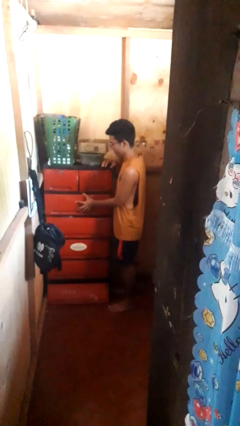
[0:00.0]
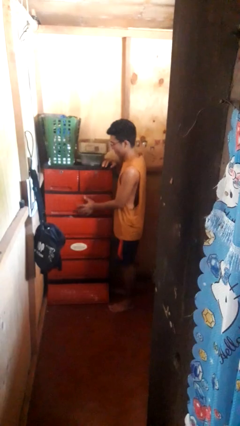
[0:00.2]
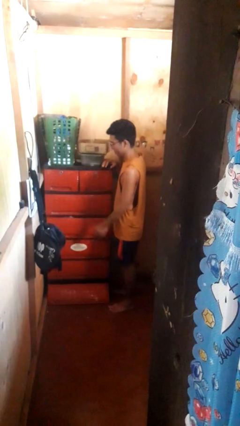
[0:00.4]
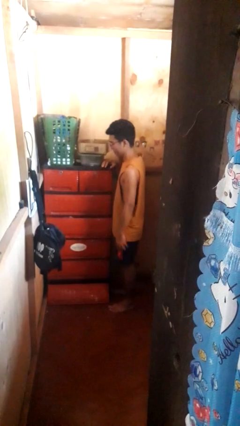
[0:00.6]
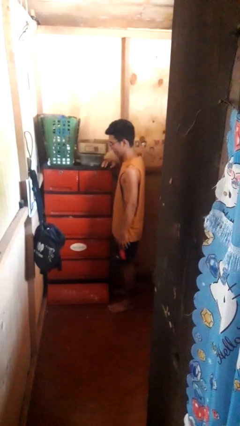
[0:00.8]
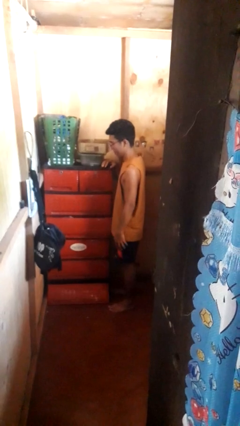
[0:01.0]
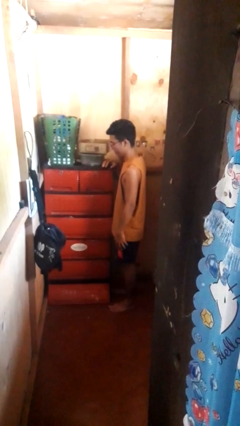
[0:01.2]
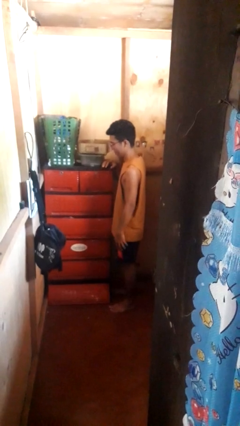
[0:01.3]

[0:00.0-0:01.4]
person closes dresser drawer

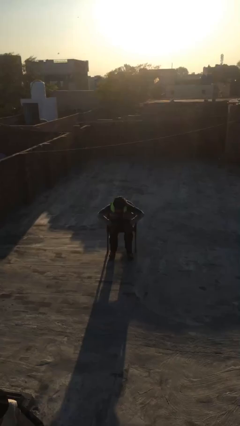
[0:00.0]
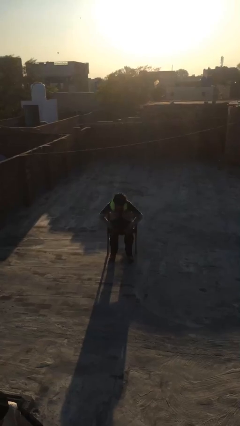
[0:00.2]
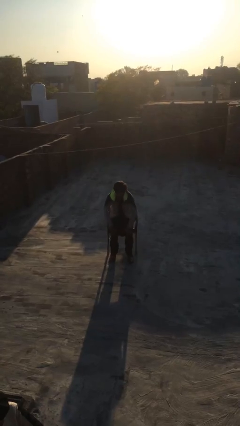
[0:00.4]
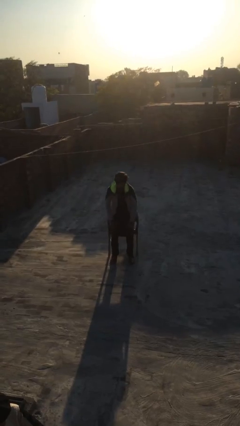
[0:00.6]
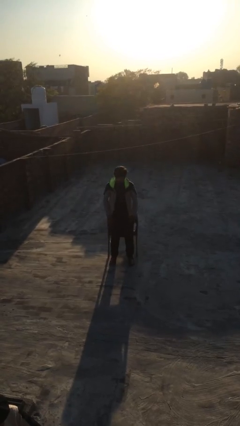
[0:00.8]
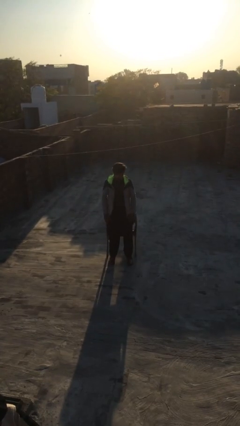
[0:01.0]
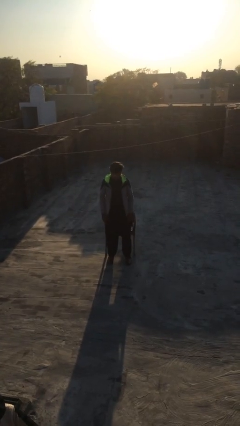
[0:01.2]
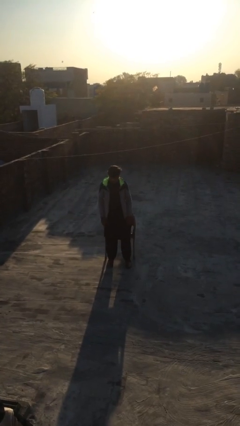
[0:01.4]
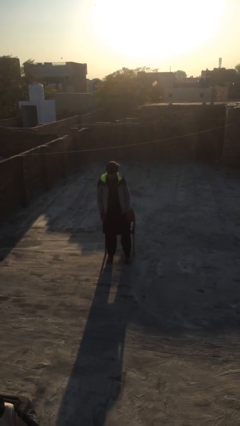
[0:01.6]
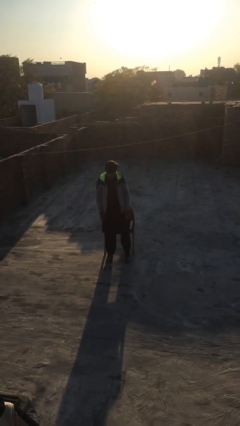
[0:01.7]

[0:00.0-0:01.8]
person stands up

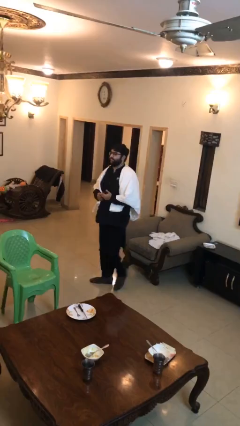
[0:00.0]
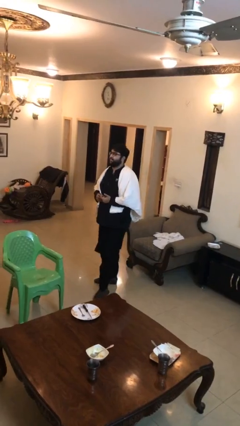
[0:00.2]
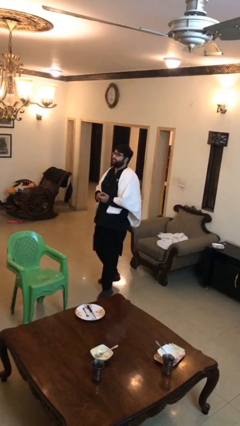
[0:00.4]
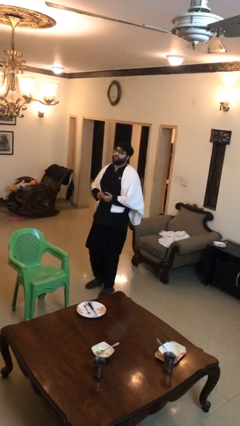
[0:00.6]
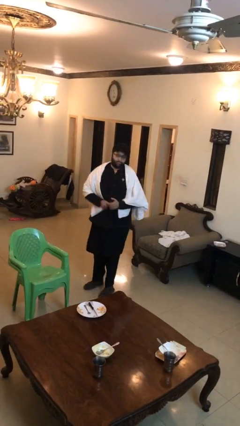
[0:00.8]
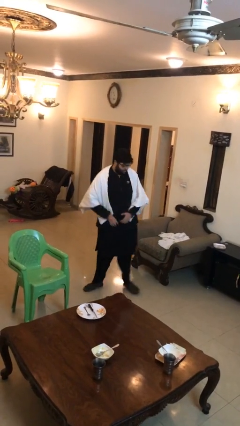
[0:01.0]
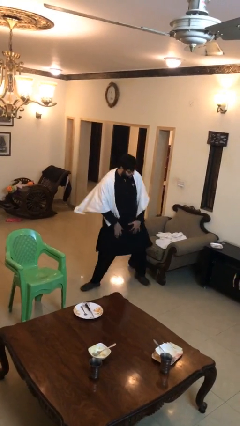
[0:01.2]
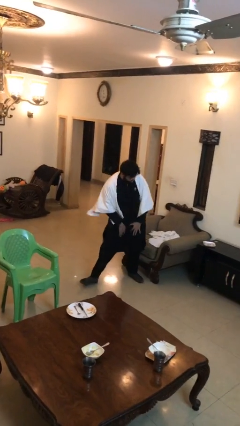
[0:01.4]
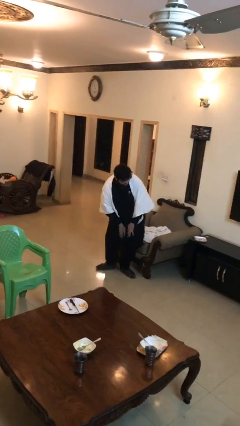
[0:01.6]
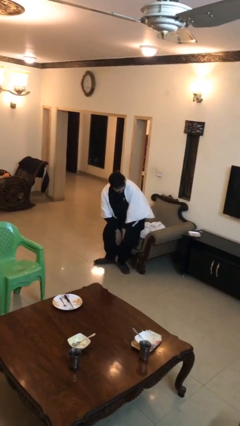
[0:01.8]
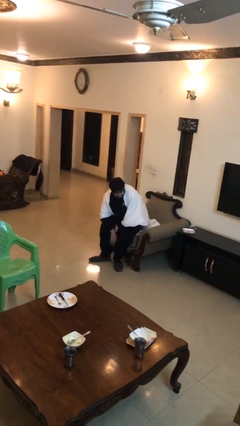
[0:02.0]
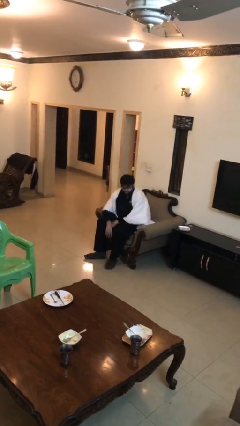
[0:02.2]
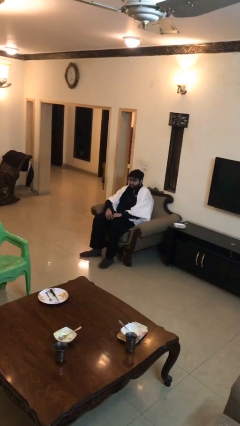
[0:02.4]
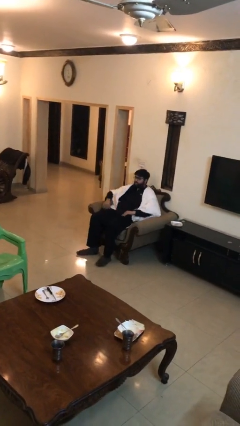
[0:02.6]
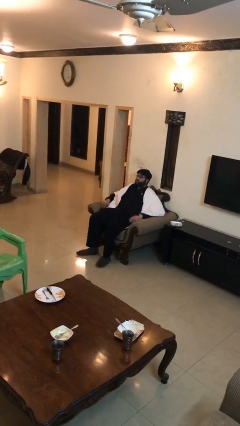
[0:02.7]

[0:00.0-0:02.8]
person sits down

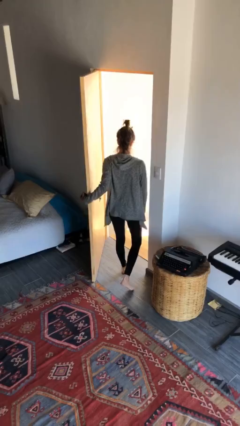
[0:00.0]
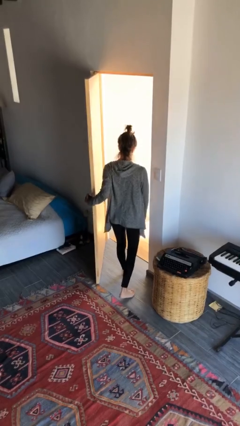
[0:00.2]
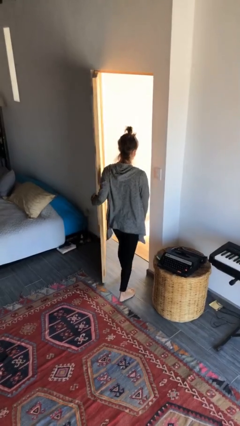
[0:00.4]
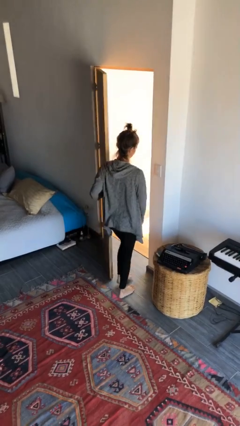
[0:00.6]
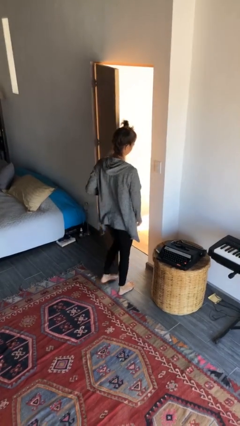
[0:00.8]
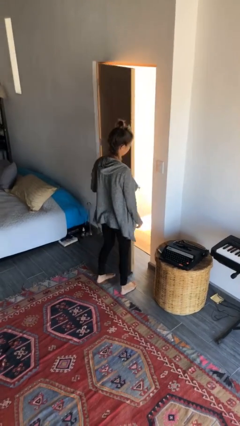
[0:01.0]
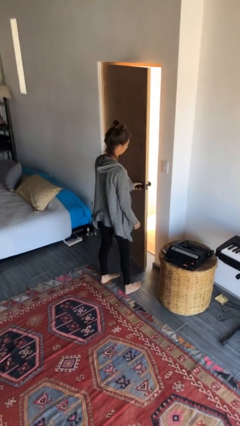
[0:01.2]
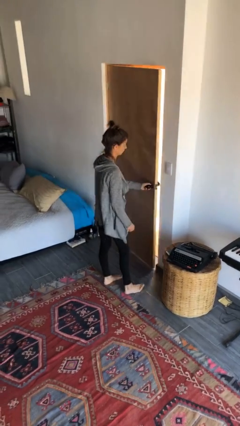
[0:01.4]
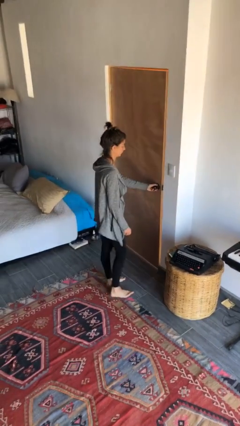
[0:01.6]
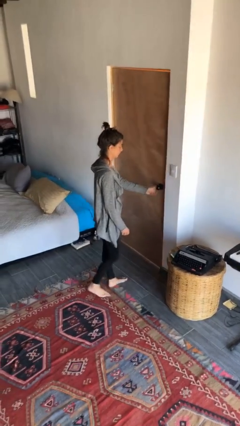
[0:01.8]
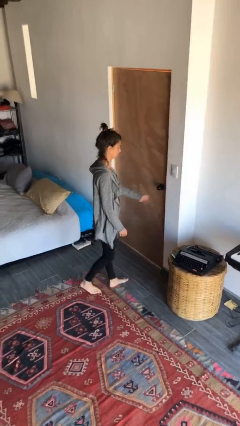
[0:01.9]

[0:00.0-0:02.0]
person closes facility door

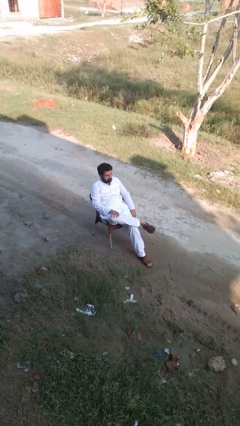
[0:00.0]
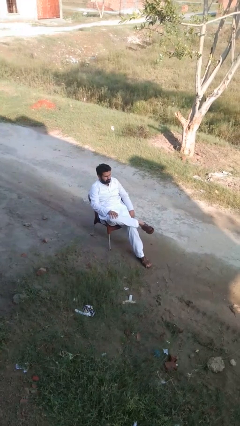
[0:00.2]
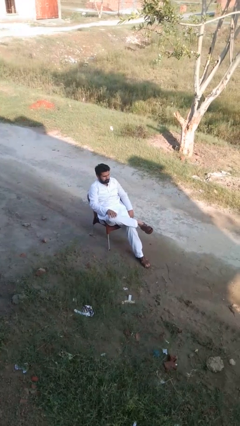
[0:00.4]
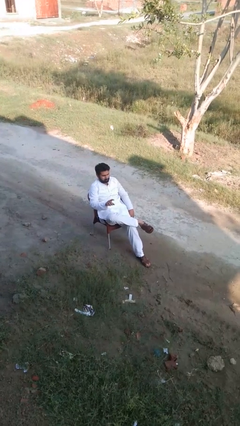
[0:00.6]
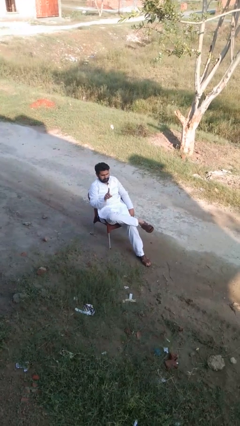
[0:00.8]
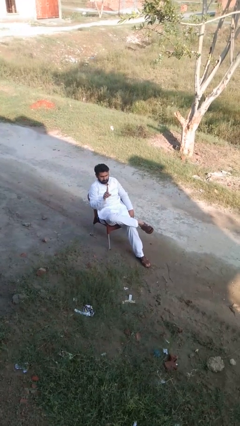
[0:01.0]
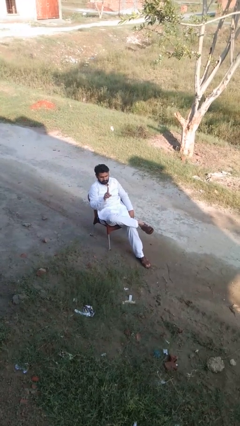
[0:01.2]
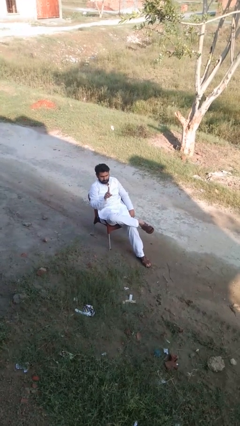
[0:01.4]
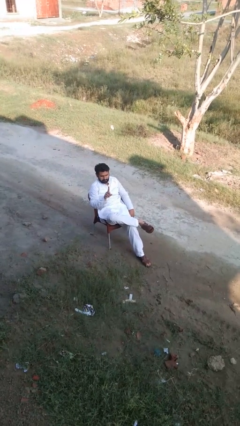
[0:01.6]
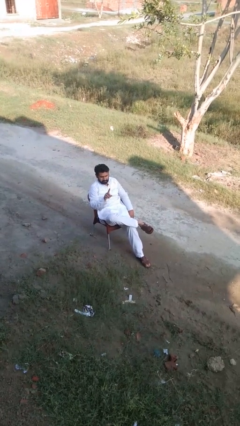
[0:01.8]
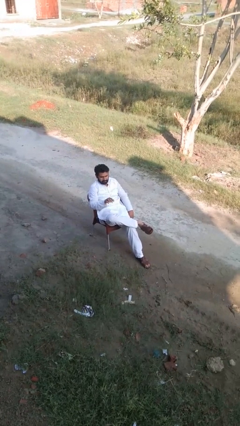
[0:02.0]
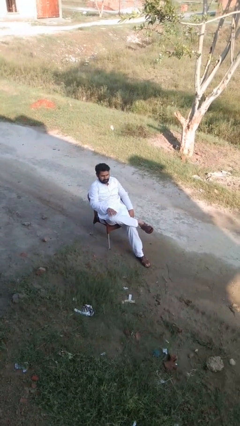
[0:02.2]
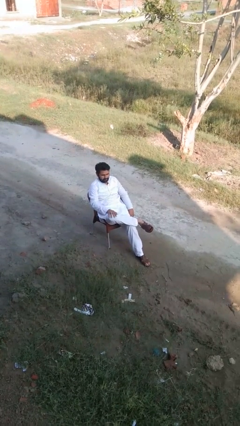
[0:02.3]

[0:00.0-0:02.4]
person gestures number one

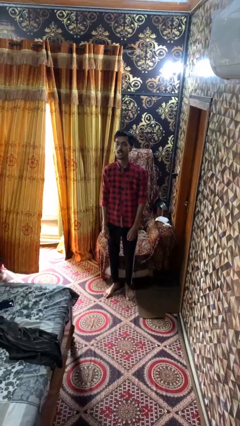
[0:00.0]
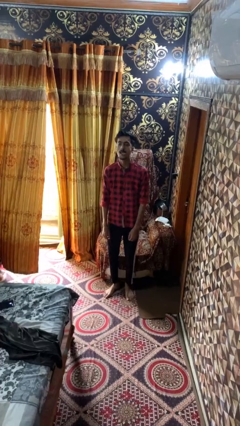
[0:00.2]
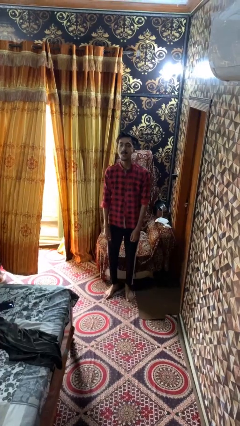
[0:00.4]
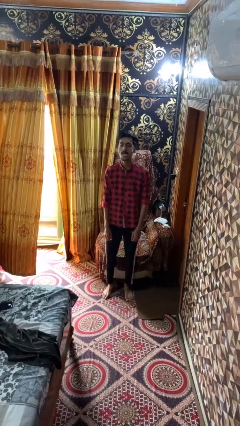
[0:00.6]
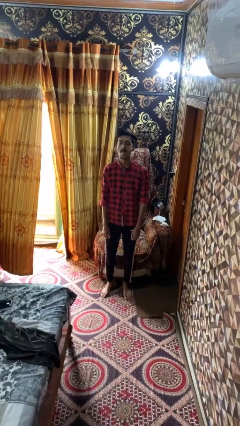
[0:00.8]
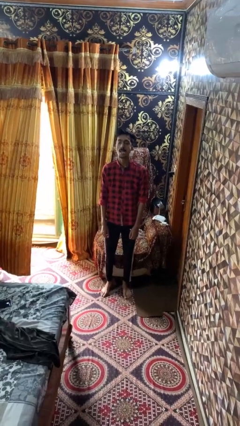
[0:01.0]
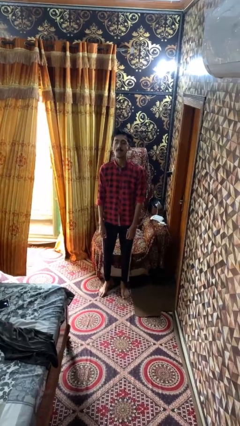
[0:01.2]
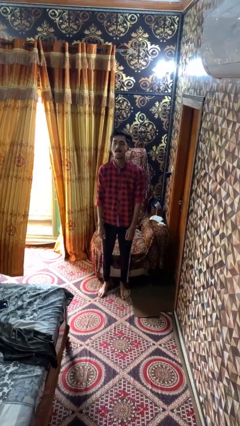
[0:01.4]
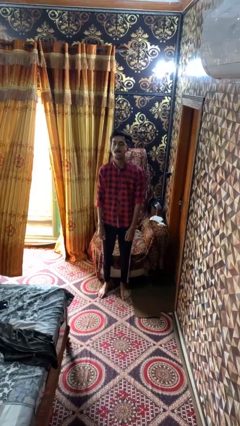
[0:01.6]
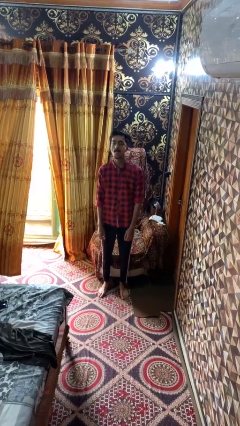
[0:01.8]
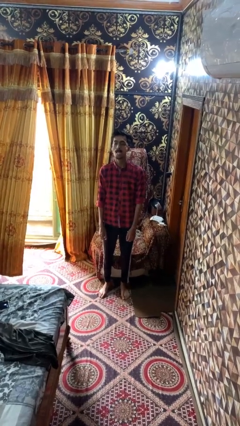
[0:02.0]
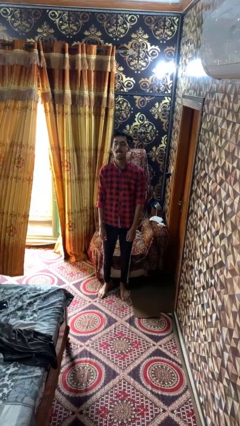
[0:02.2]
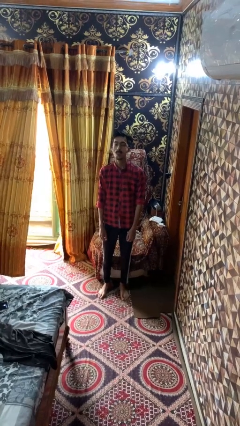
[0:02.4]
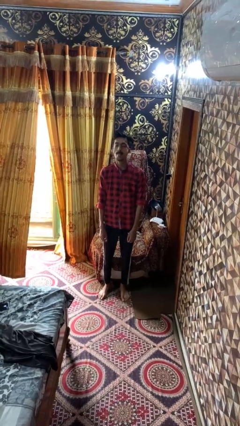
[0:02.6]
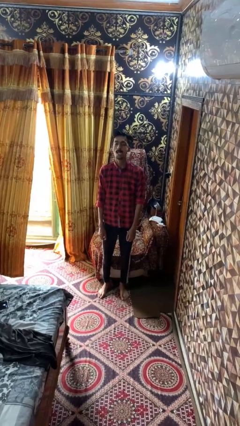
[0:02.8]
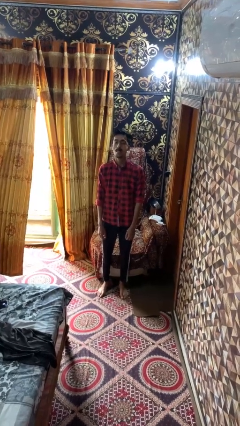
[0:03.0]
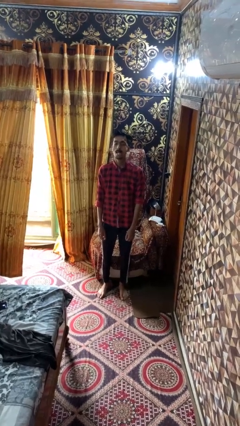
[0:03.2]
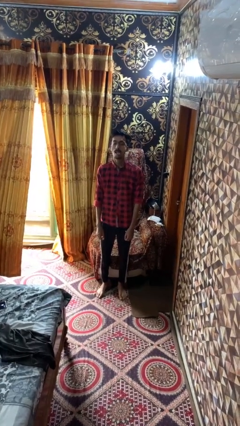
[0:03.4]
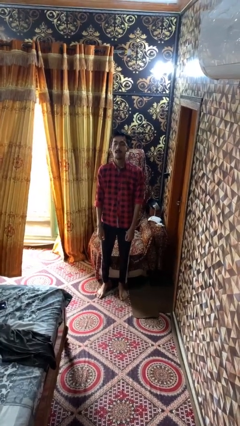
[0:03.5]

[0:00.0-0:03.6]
person sticks out tongue

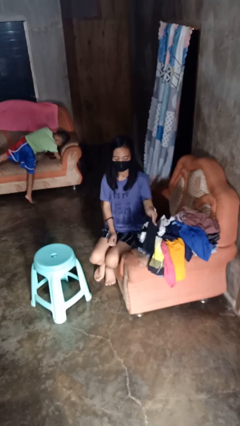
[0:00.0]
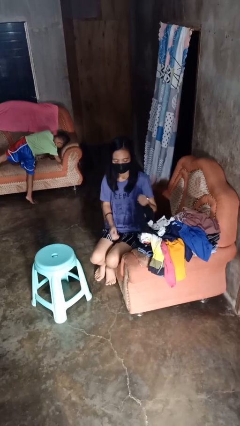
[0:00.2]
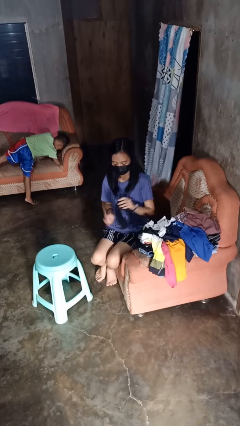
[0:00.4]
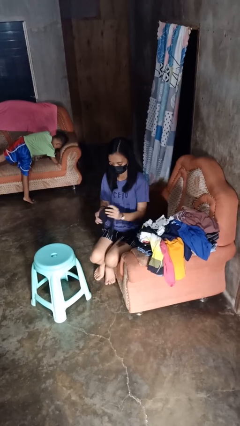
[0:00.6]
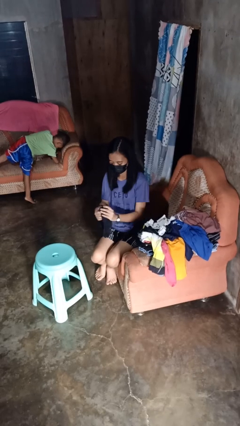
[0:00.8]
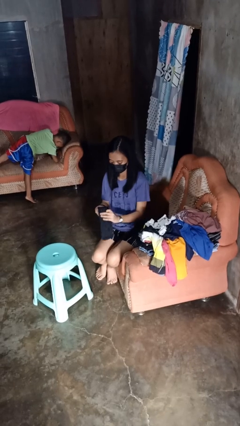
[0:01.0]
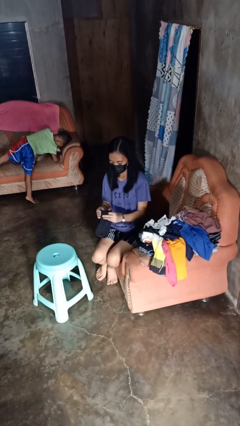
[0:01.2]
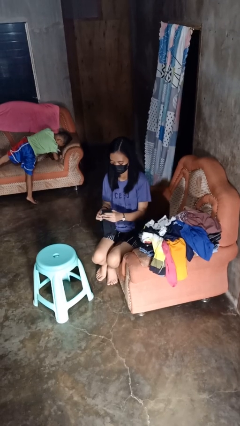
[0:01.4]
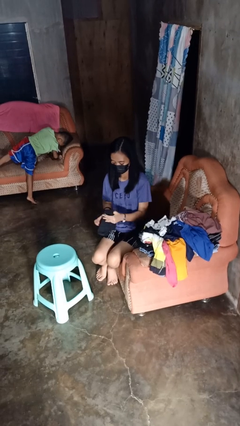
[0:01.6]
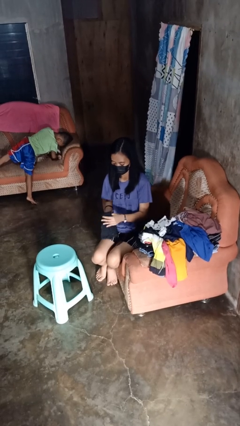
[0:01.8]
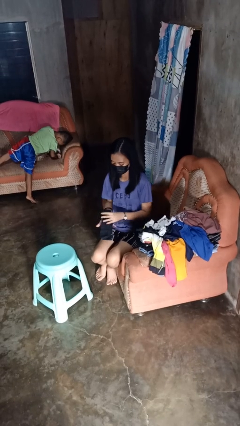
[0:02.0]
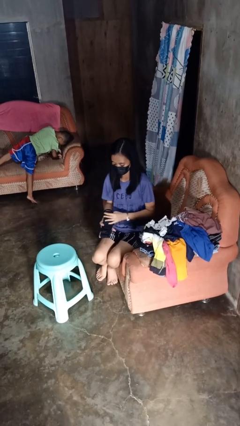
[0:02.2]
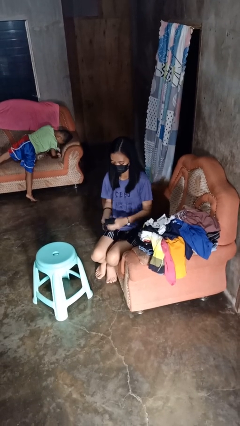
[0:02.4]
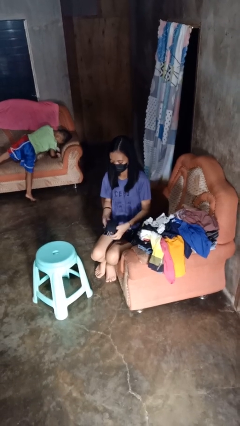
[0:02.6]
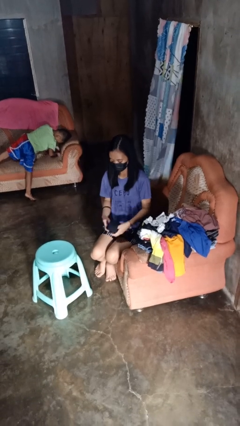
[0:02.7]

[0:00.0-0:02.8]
person folds socks

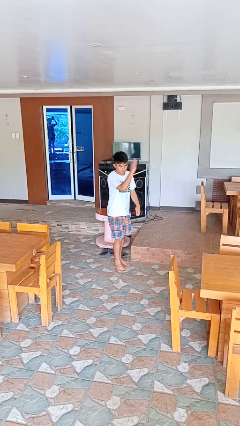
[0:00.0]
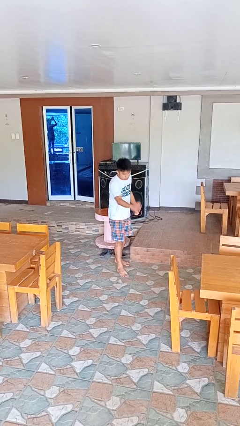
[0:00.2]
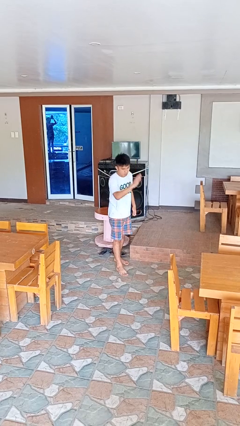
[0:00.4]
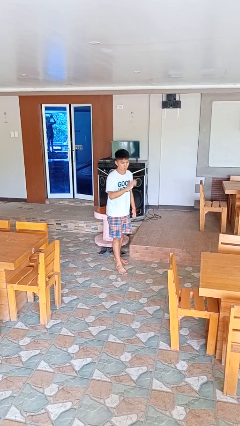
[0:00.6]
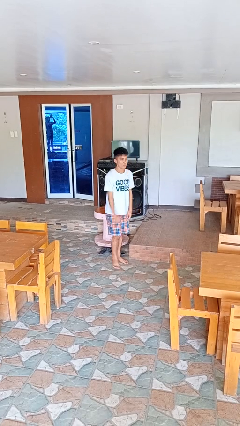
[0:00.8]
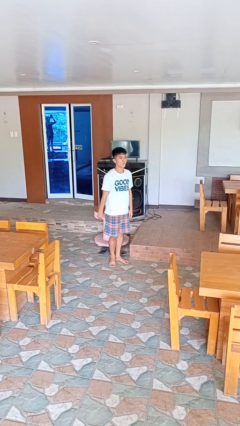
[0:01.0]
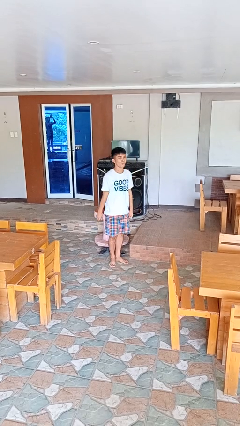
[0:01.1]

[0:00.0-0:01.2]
person karate chop
